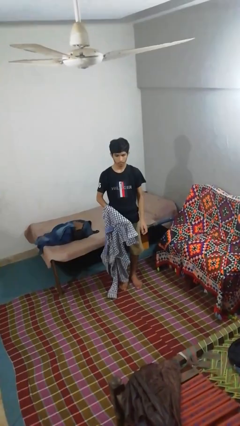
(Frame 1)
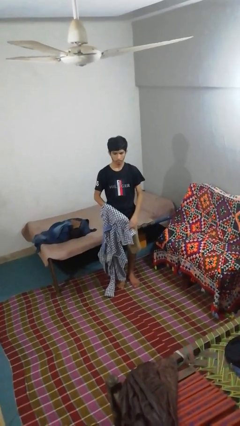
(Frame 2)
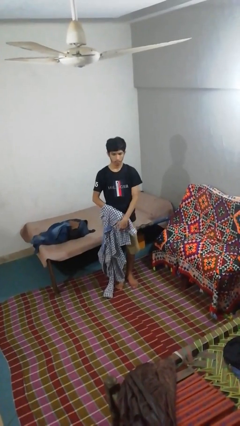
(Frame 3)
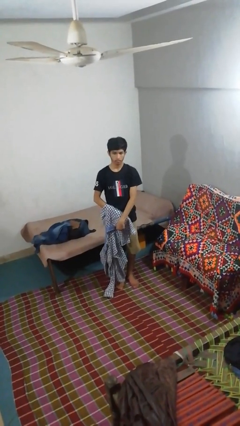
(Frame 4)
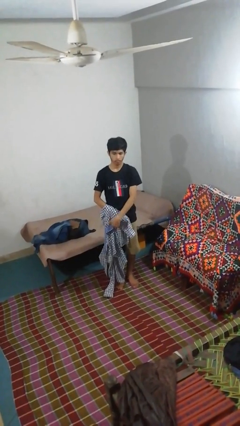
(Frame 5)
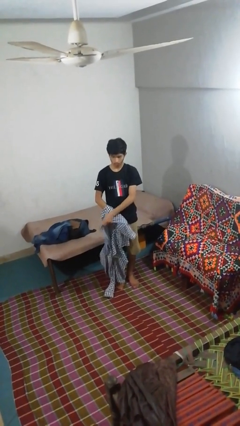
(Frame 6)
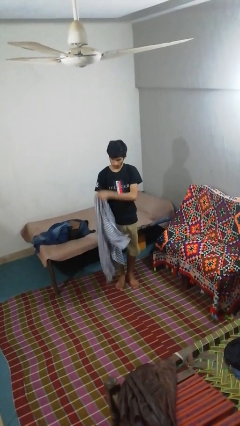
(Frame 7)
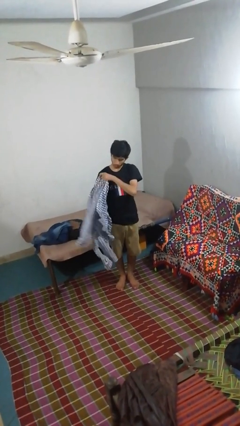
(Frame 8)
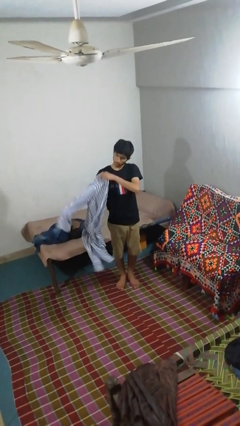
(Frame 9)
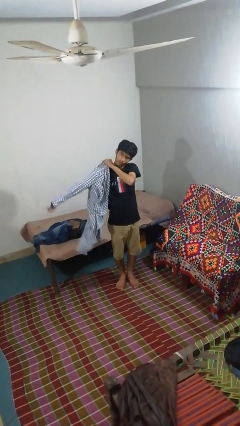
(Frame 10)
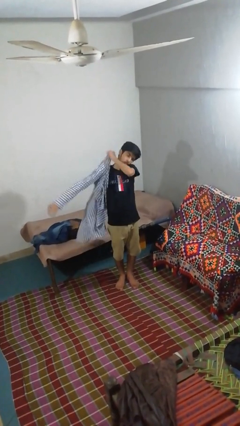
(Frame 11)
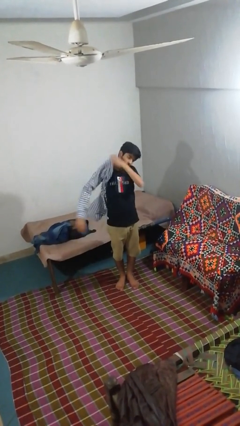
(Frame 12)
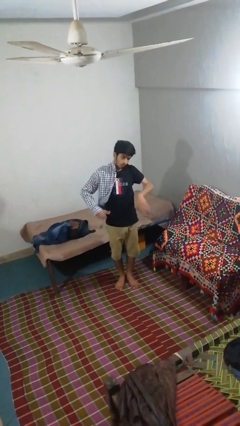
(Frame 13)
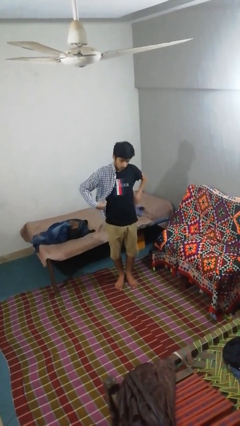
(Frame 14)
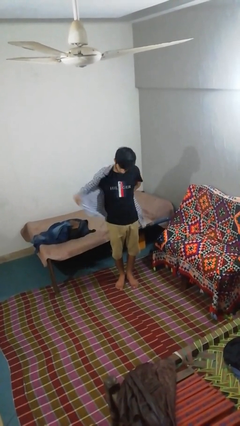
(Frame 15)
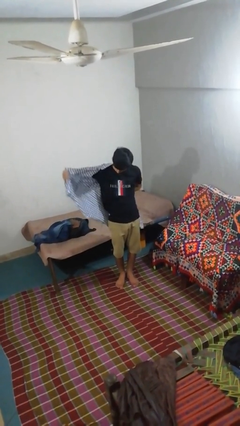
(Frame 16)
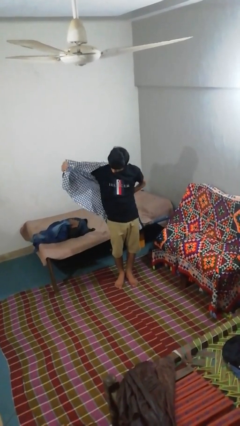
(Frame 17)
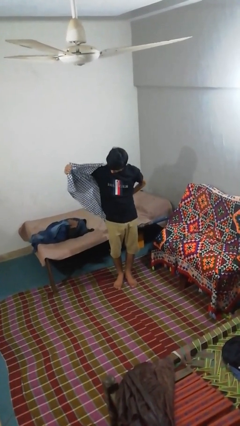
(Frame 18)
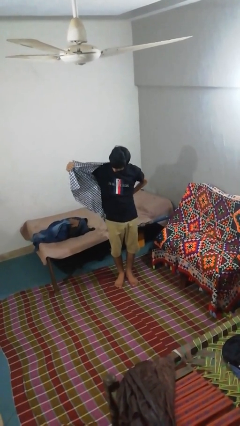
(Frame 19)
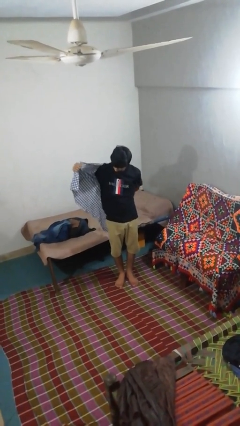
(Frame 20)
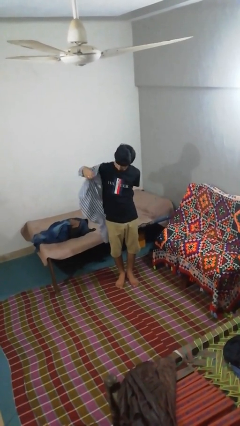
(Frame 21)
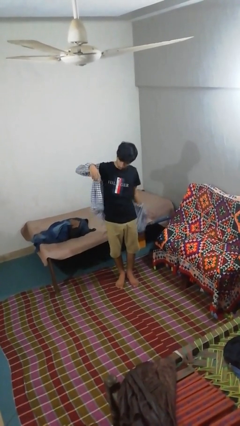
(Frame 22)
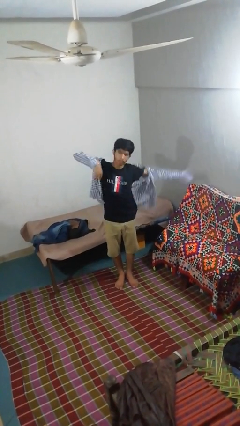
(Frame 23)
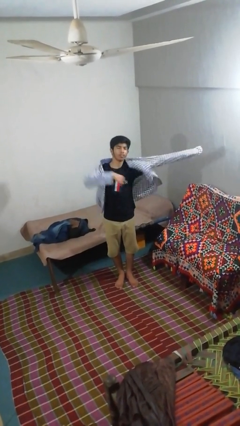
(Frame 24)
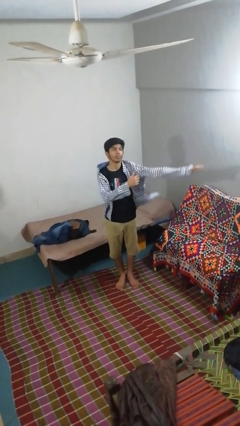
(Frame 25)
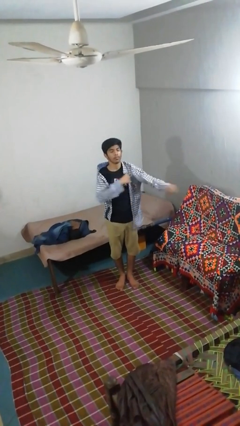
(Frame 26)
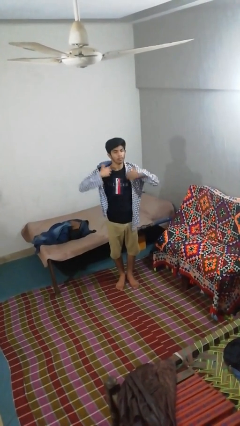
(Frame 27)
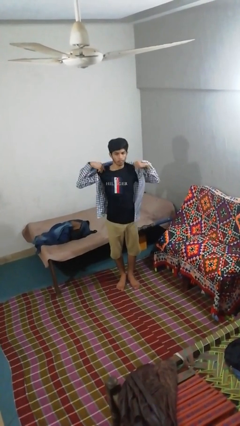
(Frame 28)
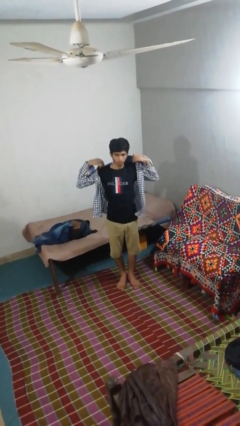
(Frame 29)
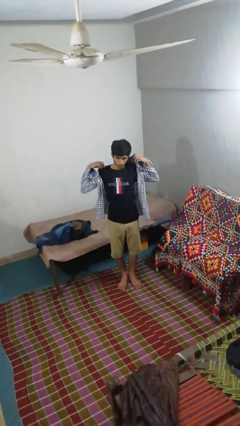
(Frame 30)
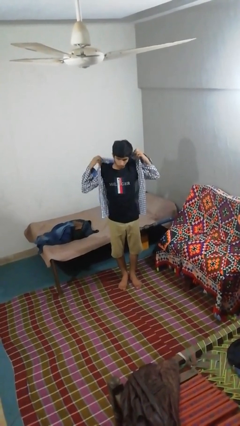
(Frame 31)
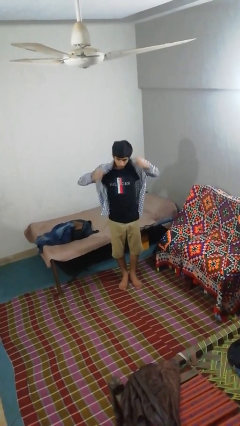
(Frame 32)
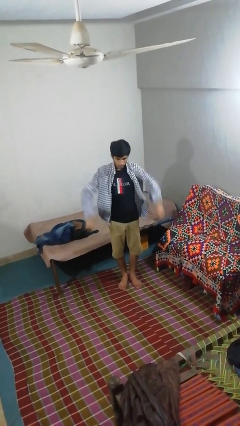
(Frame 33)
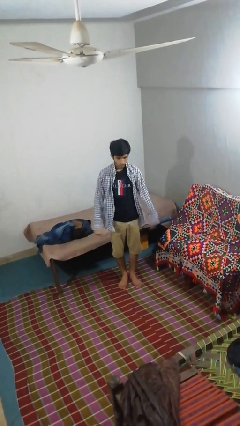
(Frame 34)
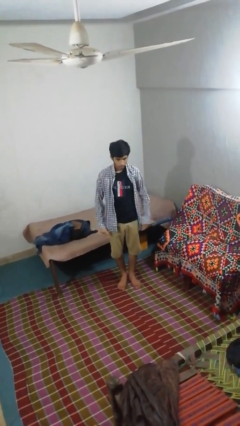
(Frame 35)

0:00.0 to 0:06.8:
person puts on shirt

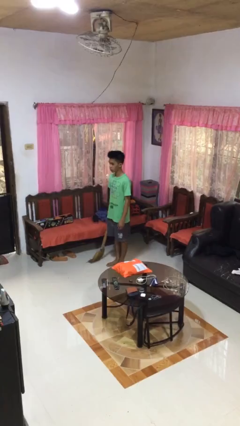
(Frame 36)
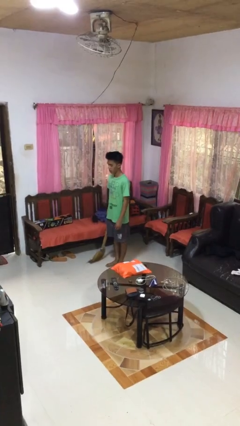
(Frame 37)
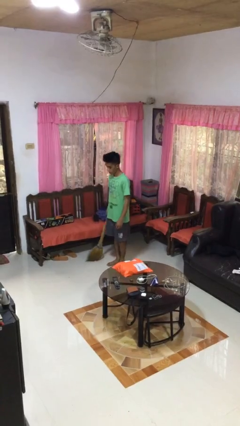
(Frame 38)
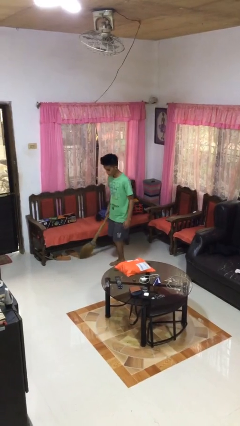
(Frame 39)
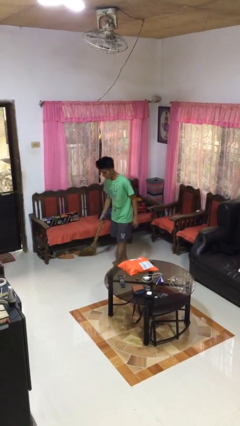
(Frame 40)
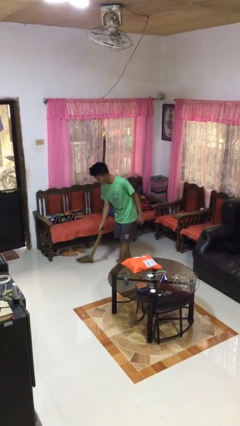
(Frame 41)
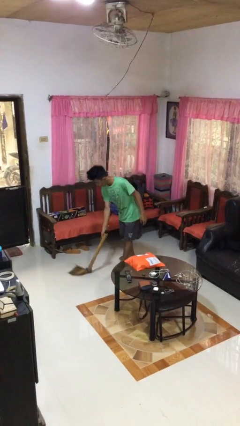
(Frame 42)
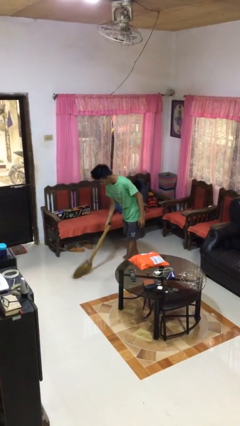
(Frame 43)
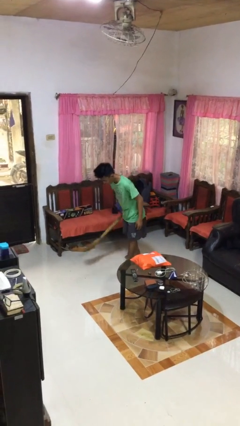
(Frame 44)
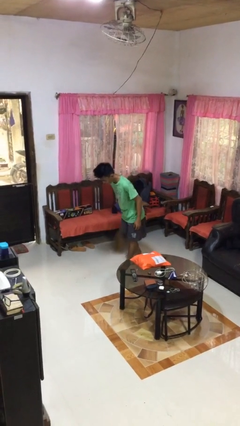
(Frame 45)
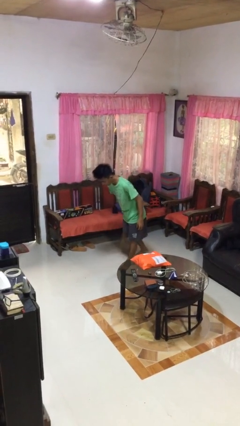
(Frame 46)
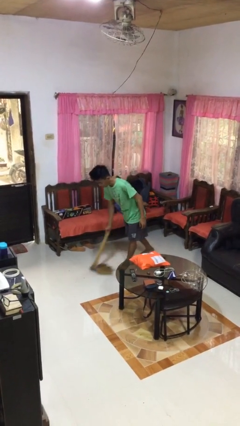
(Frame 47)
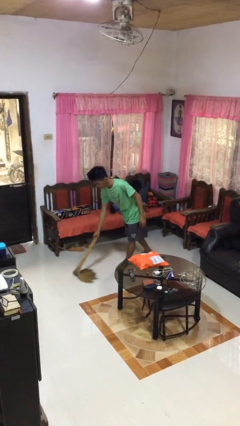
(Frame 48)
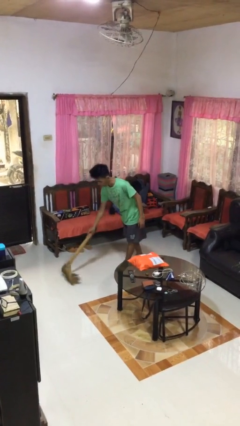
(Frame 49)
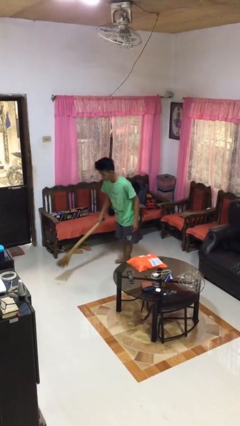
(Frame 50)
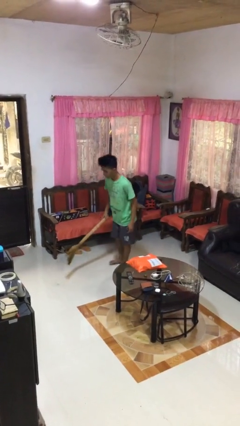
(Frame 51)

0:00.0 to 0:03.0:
person sweeps floor

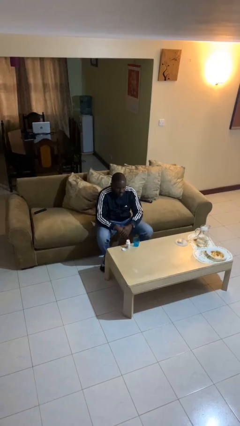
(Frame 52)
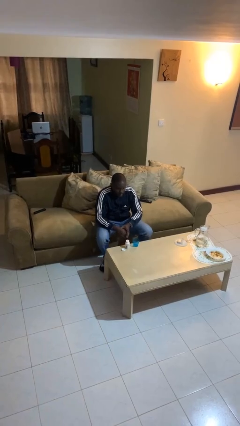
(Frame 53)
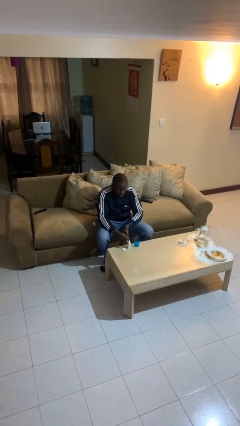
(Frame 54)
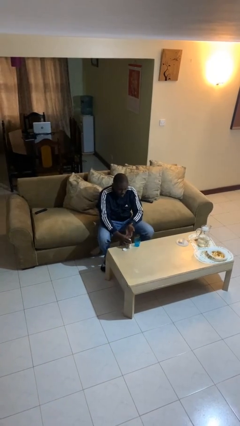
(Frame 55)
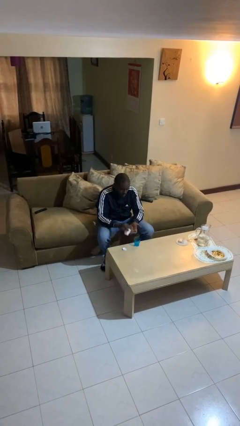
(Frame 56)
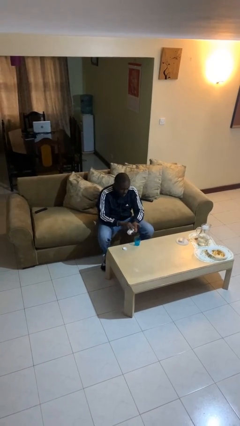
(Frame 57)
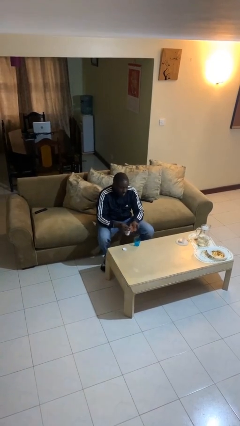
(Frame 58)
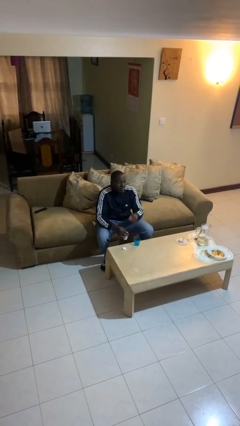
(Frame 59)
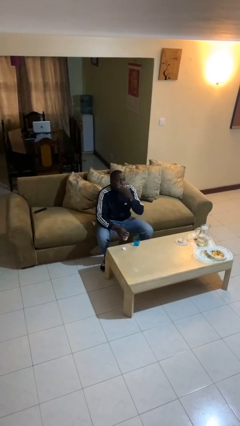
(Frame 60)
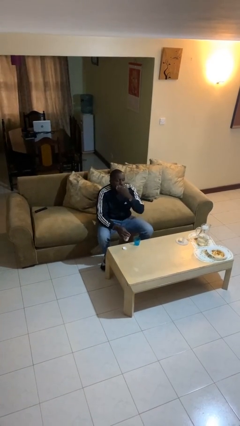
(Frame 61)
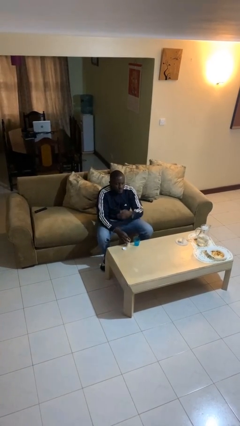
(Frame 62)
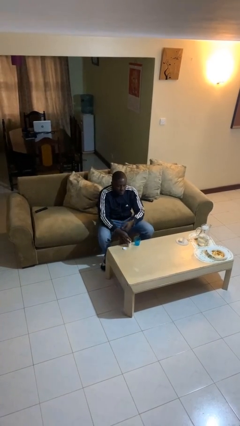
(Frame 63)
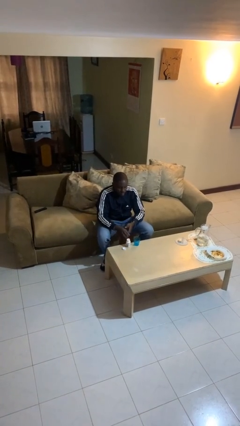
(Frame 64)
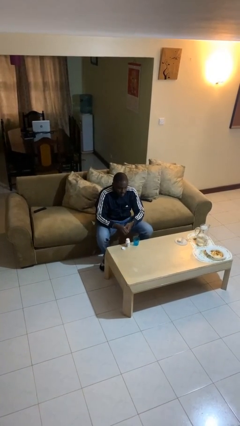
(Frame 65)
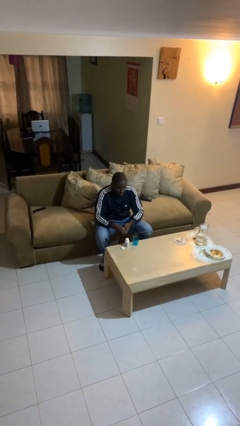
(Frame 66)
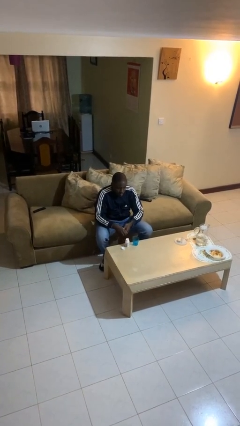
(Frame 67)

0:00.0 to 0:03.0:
person takes medicine pills

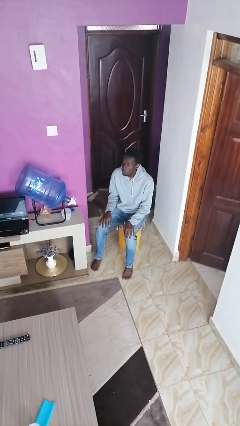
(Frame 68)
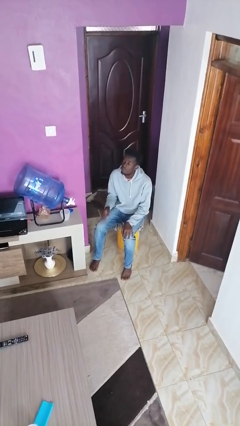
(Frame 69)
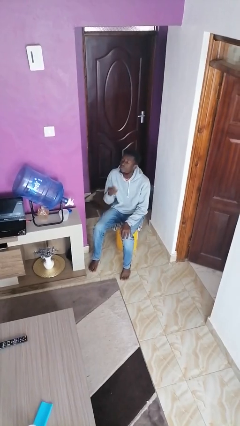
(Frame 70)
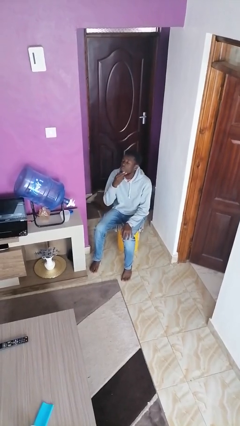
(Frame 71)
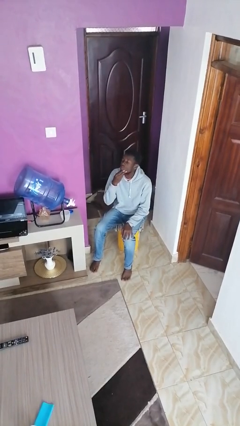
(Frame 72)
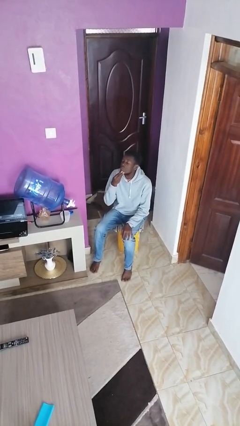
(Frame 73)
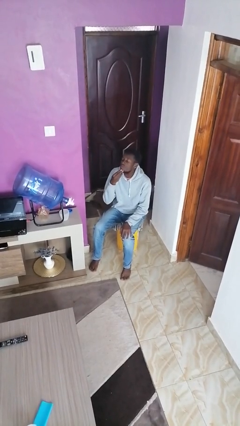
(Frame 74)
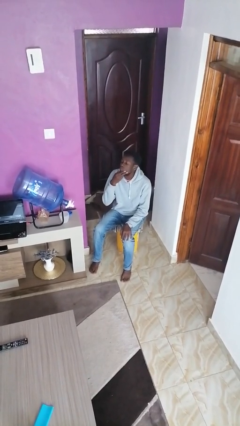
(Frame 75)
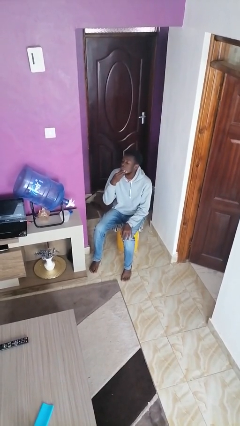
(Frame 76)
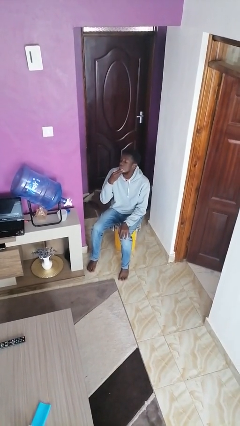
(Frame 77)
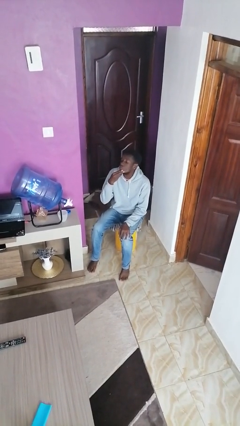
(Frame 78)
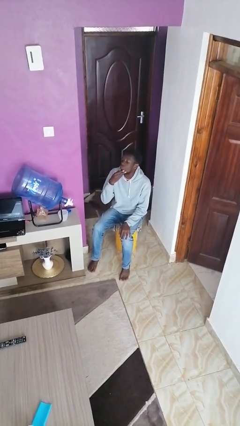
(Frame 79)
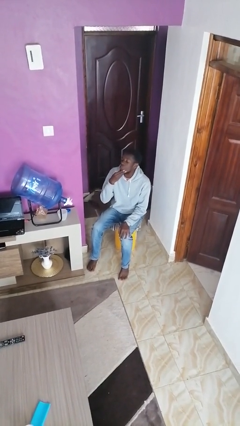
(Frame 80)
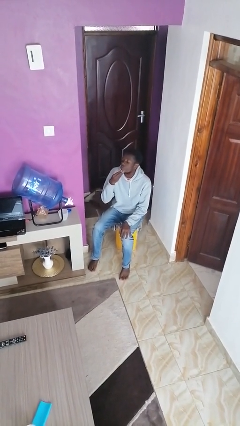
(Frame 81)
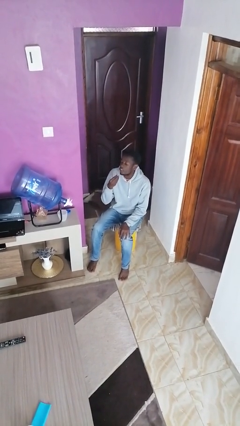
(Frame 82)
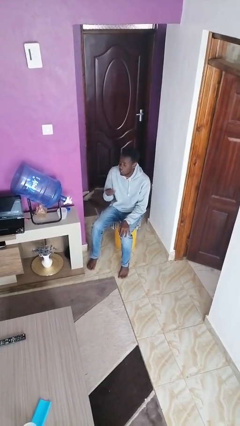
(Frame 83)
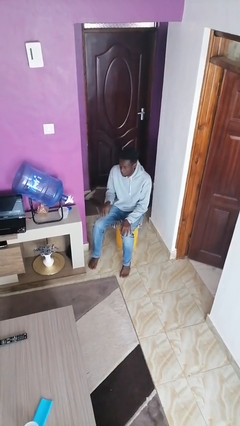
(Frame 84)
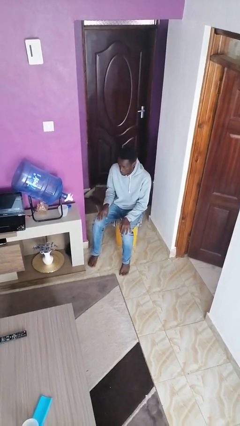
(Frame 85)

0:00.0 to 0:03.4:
person strokes chin

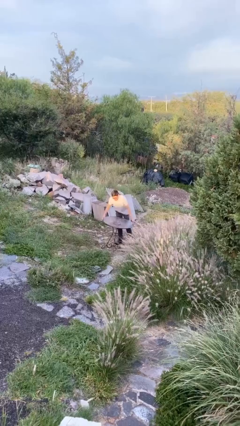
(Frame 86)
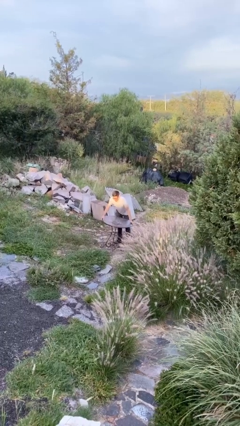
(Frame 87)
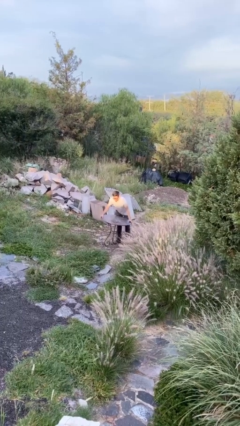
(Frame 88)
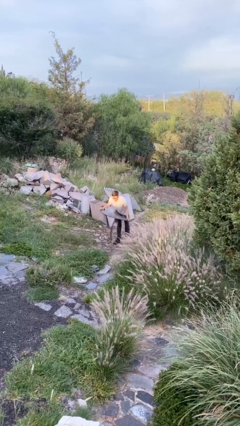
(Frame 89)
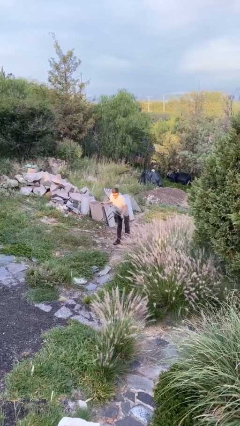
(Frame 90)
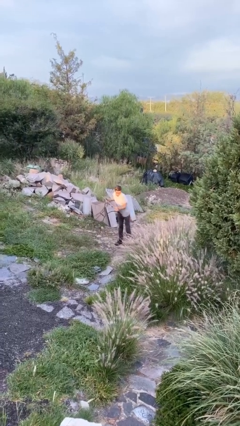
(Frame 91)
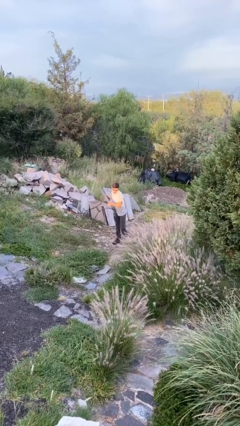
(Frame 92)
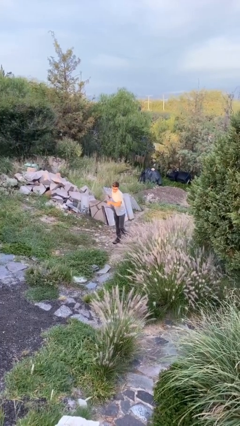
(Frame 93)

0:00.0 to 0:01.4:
person picks up object from floor

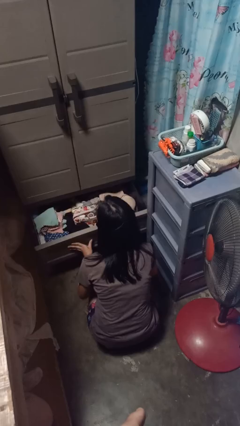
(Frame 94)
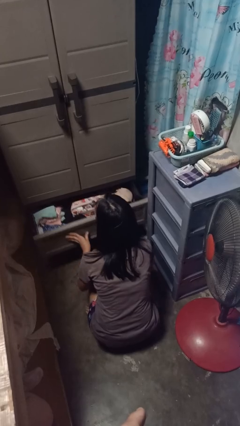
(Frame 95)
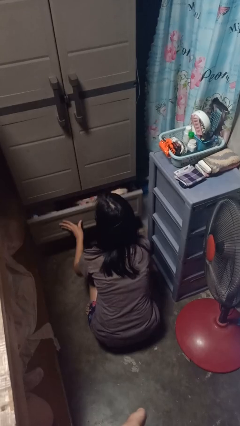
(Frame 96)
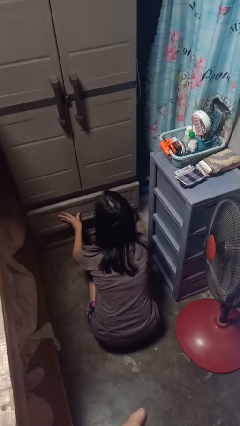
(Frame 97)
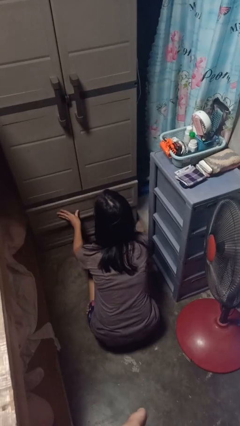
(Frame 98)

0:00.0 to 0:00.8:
person closes dresser drawer
